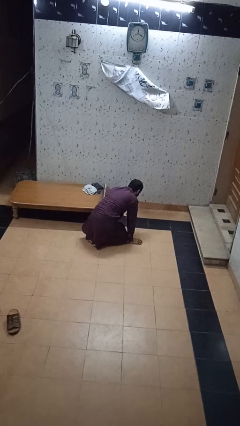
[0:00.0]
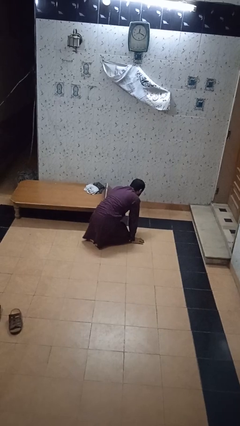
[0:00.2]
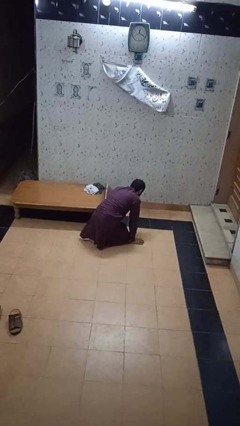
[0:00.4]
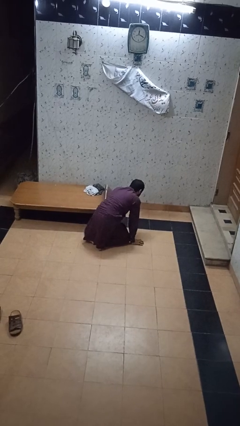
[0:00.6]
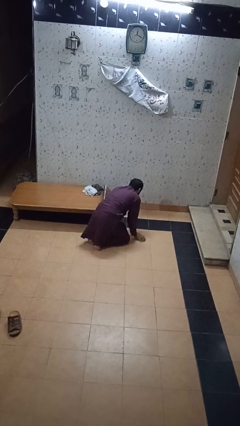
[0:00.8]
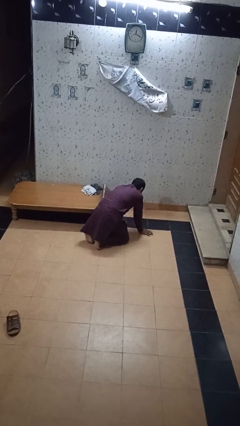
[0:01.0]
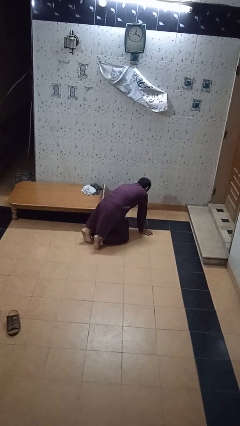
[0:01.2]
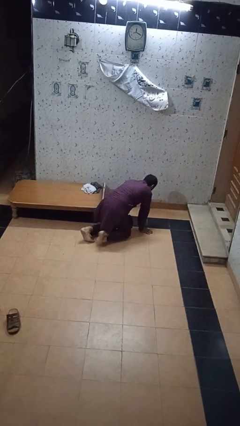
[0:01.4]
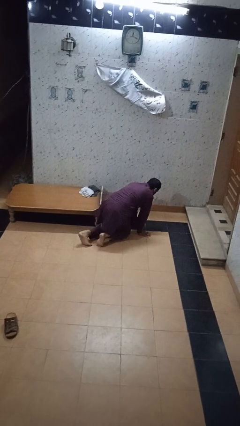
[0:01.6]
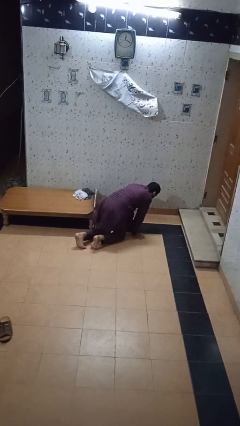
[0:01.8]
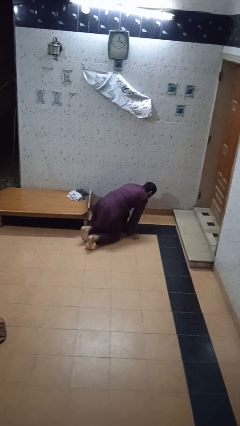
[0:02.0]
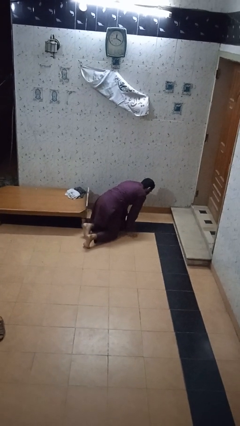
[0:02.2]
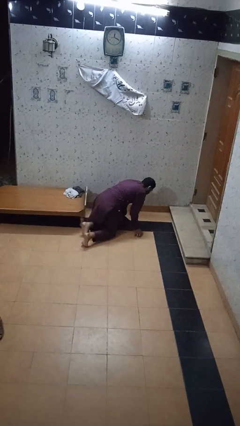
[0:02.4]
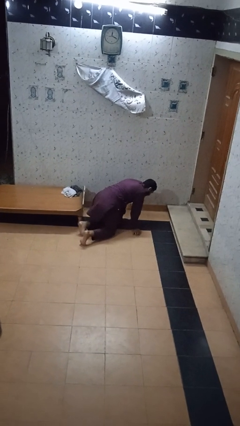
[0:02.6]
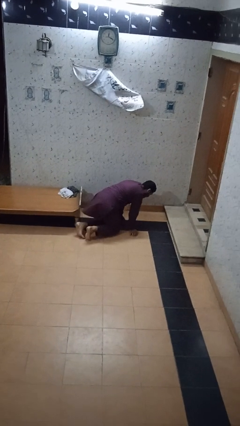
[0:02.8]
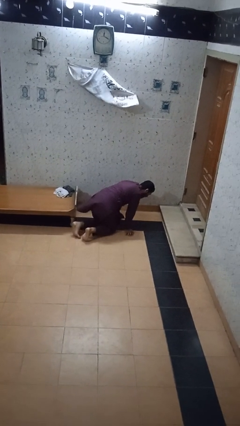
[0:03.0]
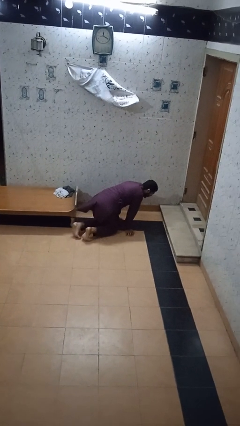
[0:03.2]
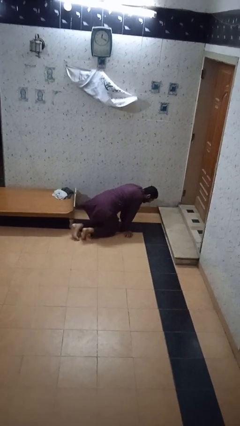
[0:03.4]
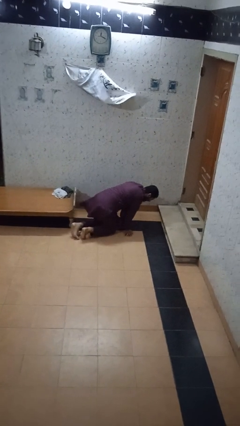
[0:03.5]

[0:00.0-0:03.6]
person crawls

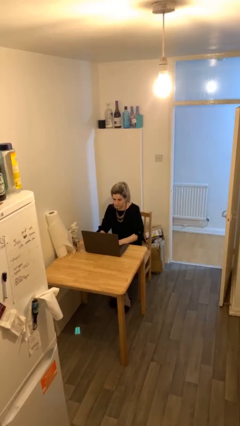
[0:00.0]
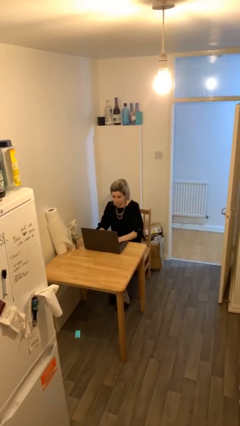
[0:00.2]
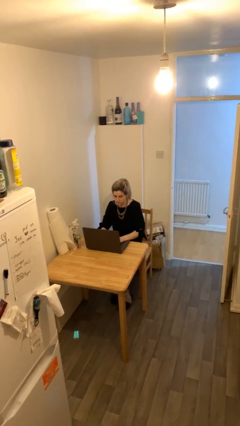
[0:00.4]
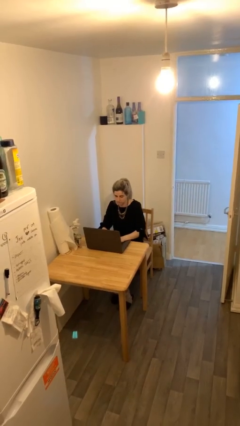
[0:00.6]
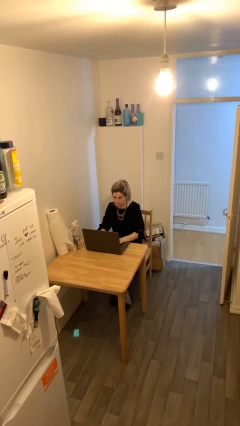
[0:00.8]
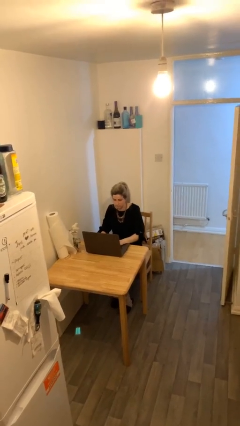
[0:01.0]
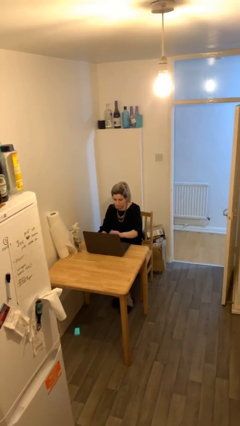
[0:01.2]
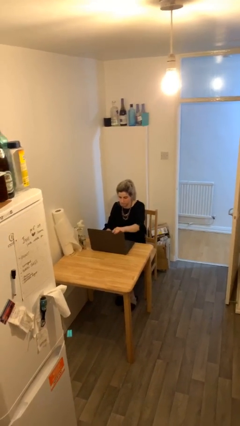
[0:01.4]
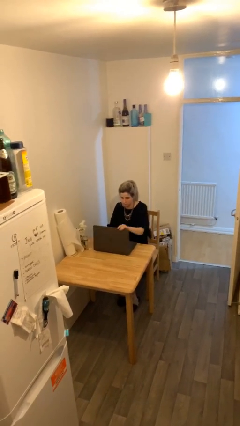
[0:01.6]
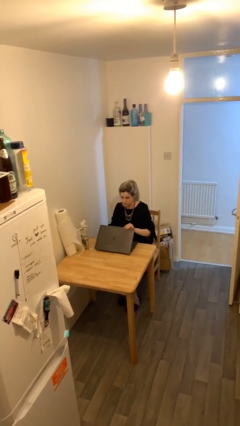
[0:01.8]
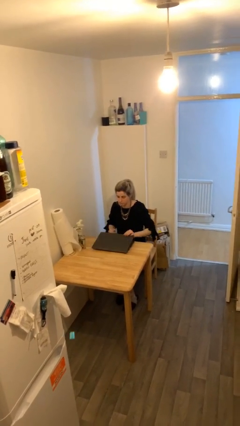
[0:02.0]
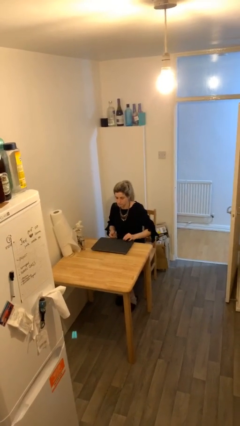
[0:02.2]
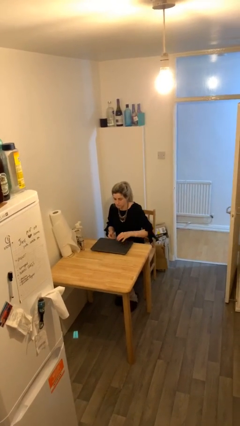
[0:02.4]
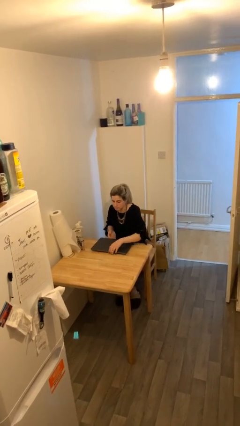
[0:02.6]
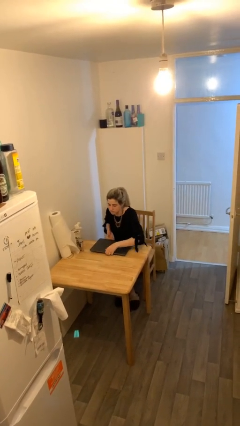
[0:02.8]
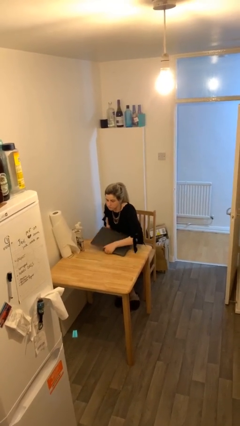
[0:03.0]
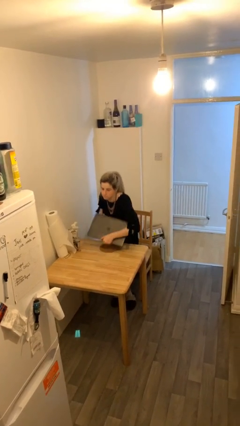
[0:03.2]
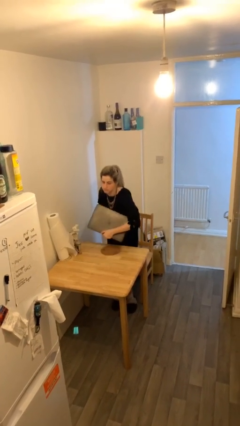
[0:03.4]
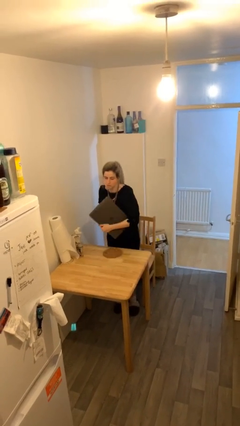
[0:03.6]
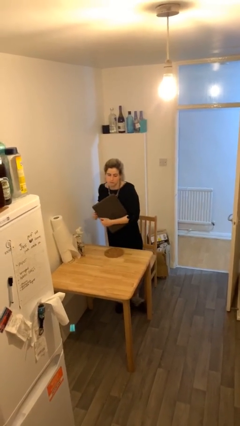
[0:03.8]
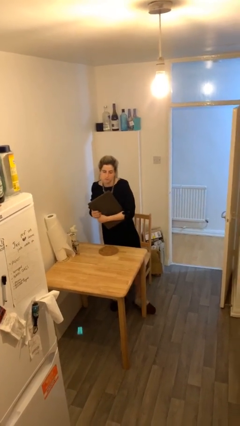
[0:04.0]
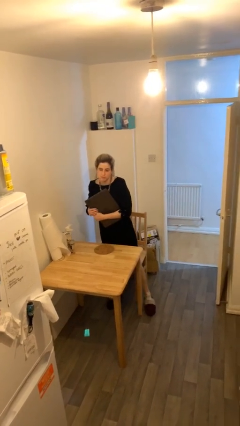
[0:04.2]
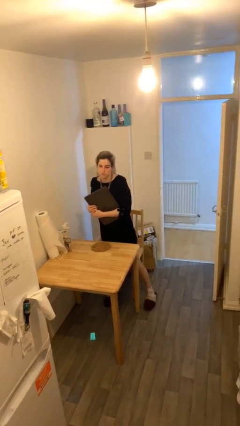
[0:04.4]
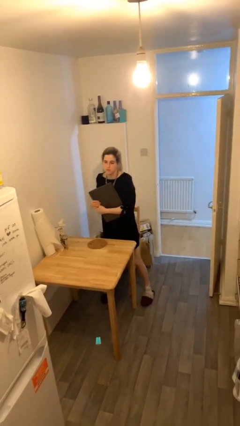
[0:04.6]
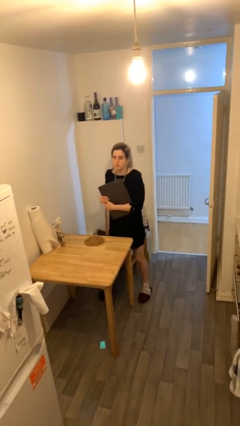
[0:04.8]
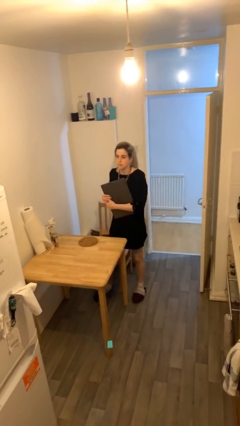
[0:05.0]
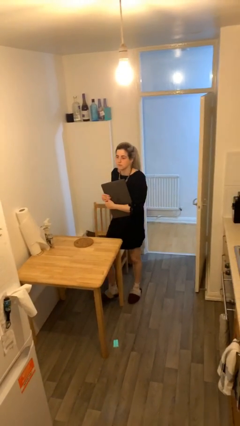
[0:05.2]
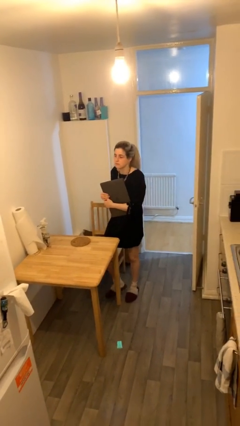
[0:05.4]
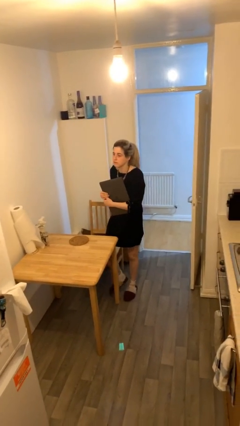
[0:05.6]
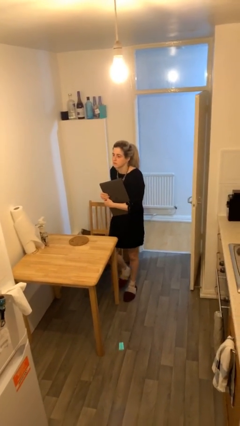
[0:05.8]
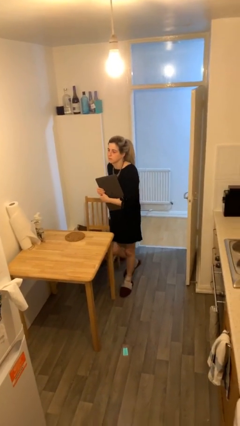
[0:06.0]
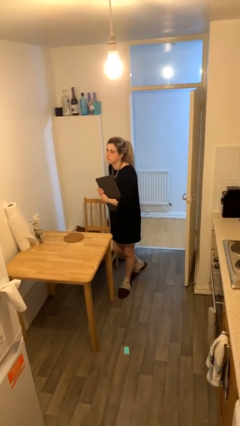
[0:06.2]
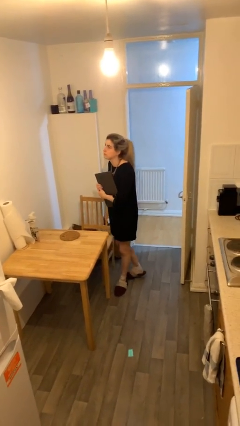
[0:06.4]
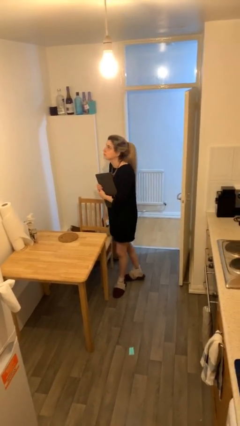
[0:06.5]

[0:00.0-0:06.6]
person stands up

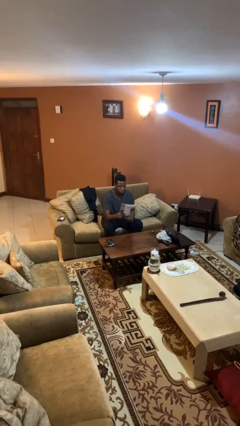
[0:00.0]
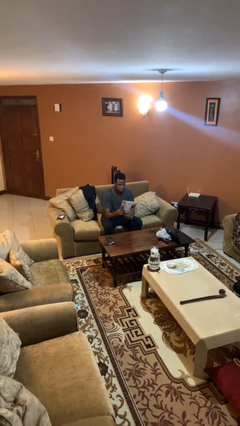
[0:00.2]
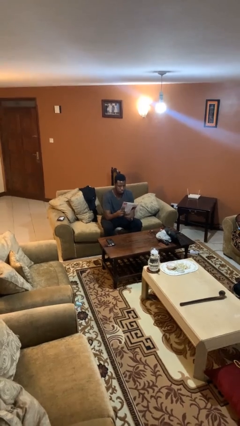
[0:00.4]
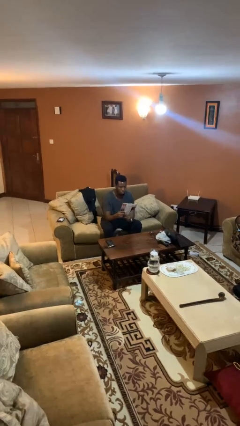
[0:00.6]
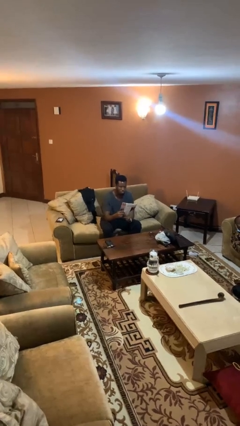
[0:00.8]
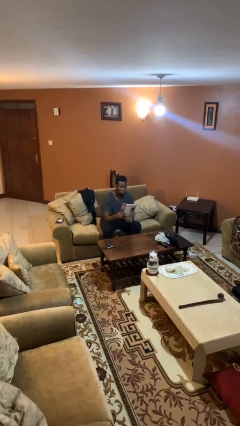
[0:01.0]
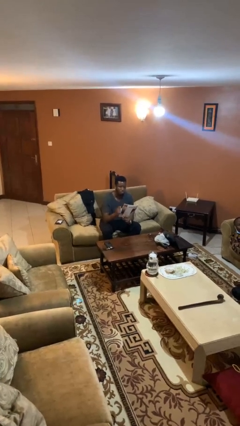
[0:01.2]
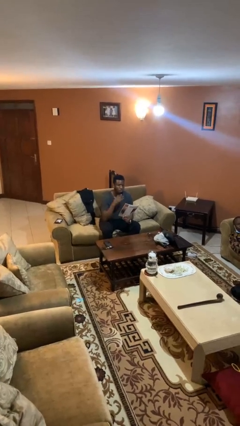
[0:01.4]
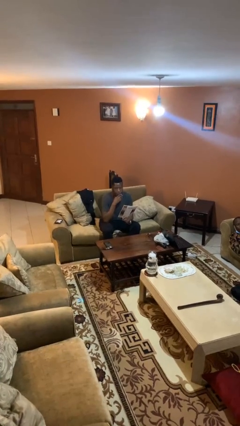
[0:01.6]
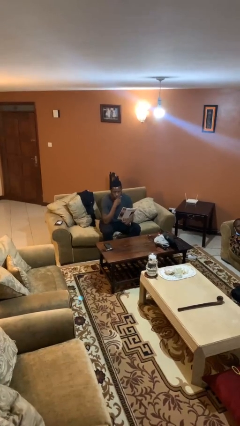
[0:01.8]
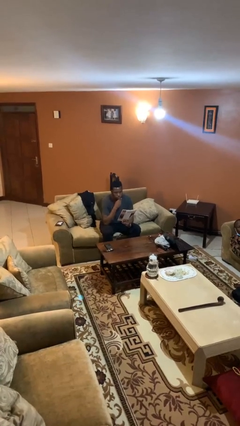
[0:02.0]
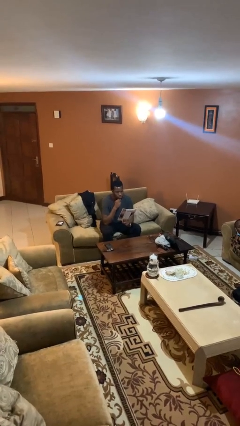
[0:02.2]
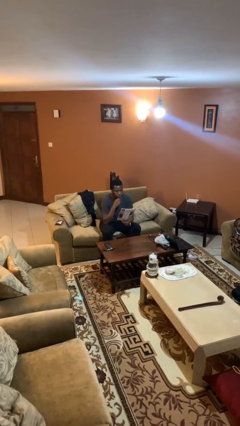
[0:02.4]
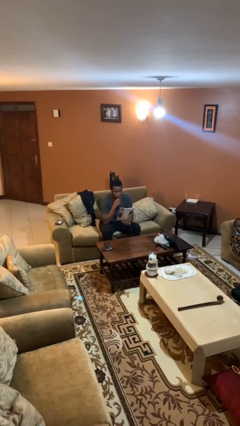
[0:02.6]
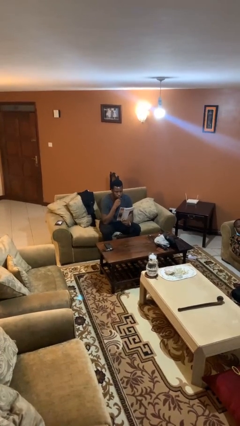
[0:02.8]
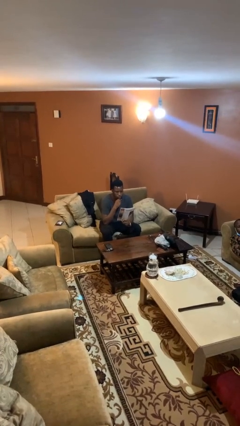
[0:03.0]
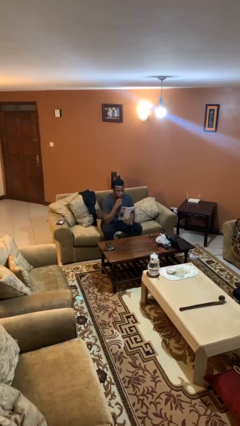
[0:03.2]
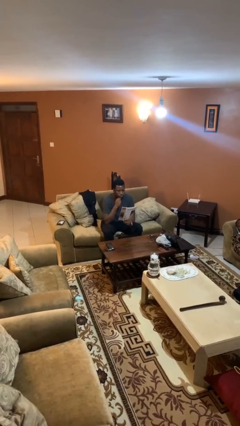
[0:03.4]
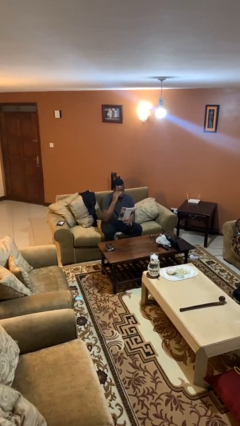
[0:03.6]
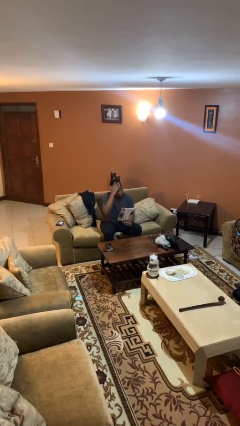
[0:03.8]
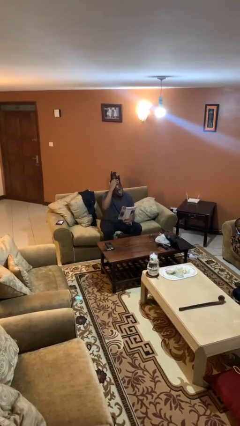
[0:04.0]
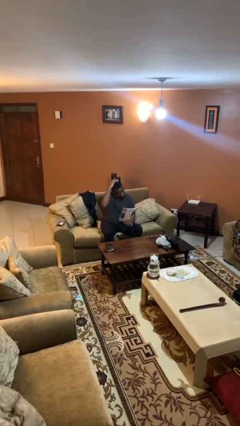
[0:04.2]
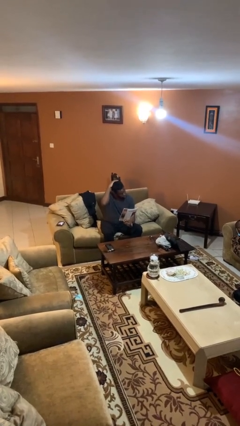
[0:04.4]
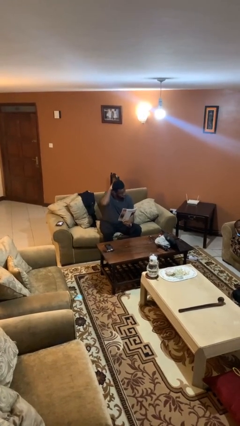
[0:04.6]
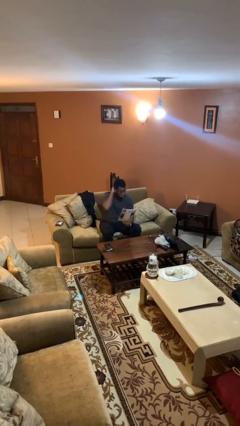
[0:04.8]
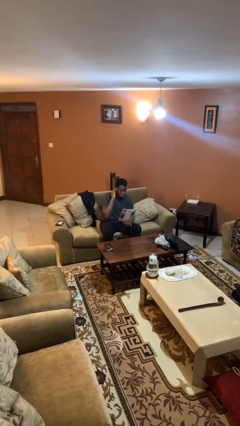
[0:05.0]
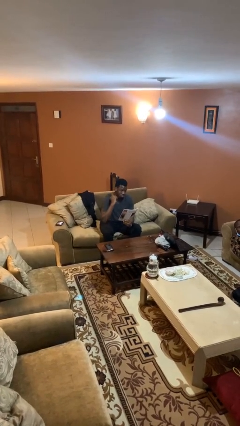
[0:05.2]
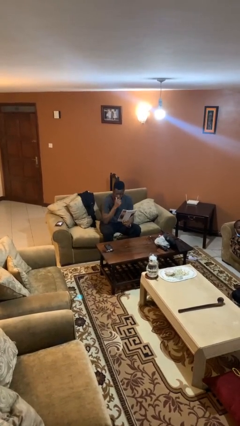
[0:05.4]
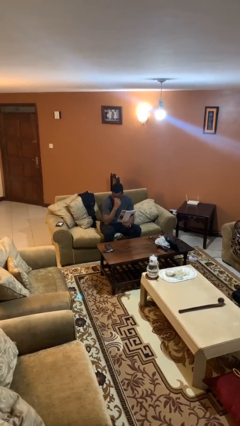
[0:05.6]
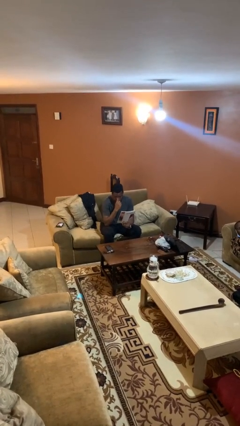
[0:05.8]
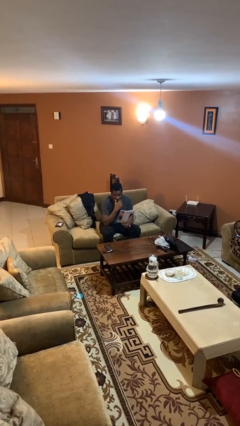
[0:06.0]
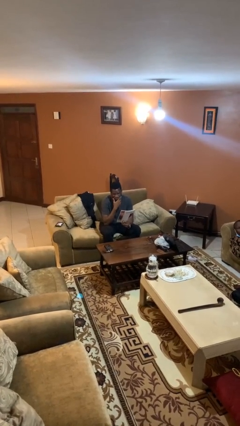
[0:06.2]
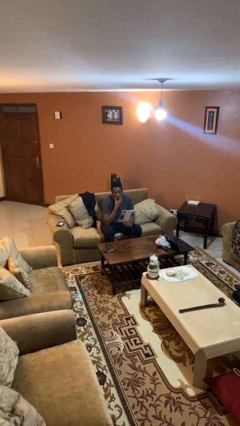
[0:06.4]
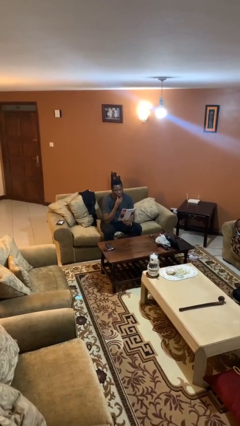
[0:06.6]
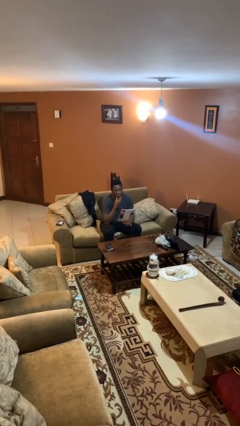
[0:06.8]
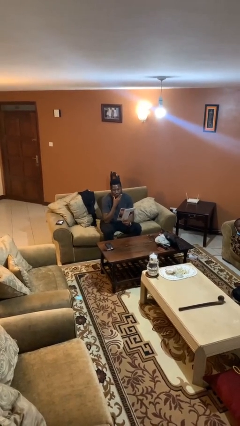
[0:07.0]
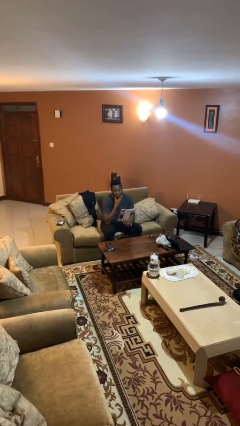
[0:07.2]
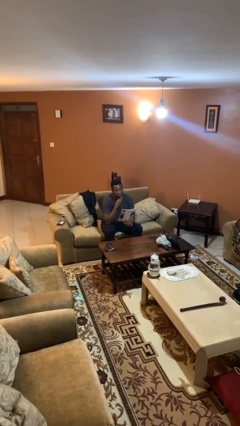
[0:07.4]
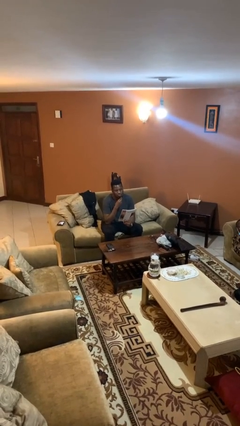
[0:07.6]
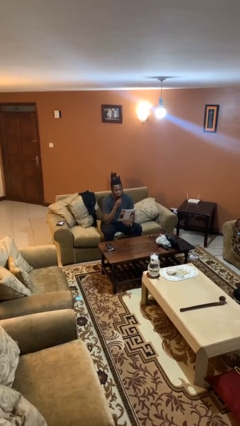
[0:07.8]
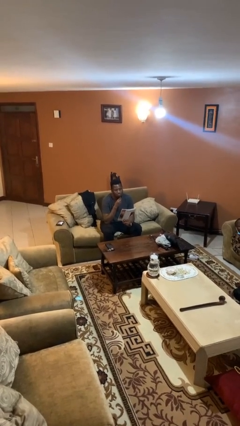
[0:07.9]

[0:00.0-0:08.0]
person reads document
